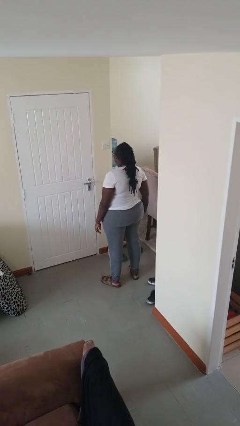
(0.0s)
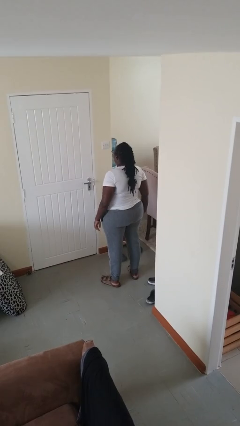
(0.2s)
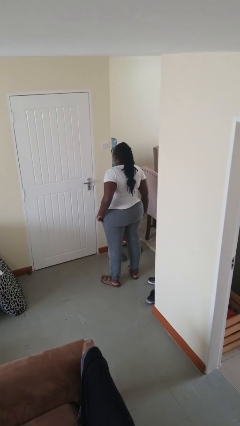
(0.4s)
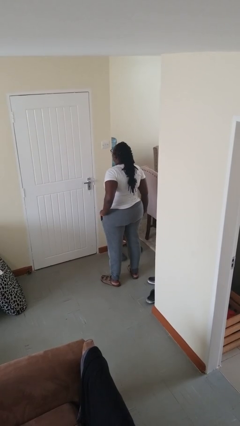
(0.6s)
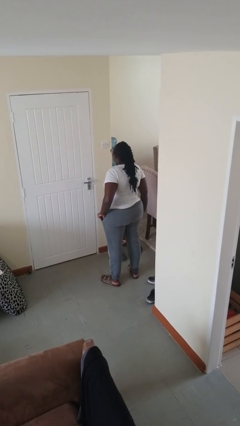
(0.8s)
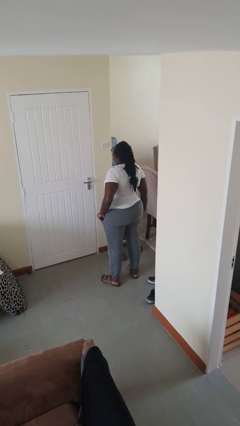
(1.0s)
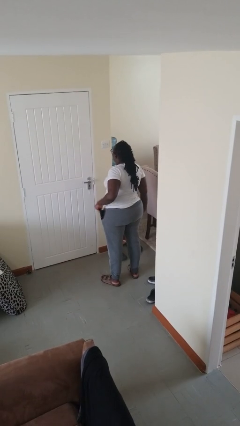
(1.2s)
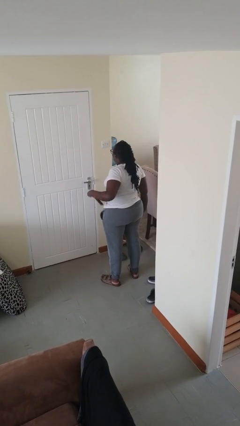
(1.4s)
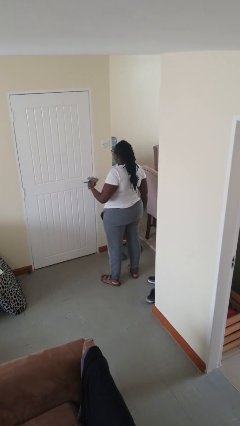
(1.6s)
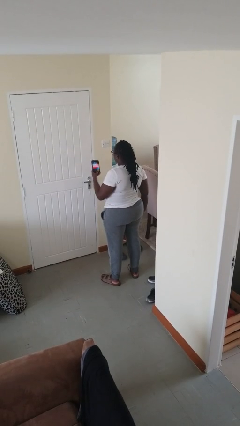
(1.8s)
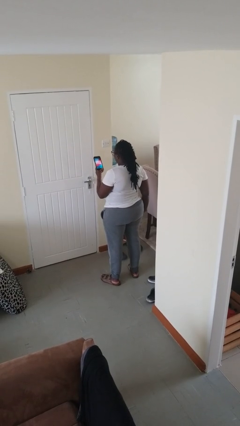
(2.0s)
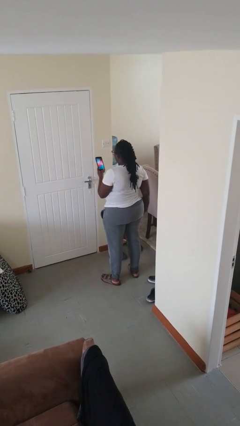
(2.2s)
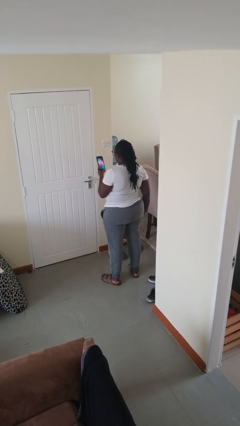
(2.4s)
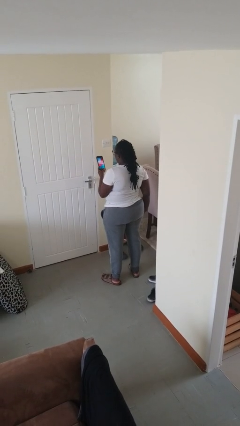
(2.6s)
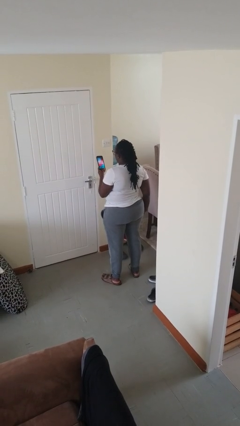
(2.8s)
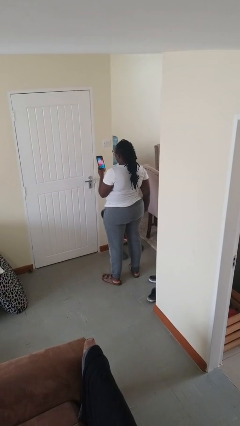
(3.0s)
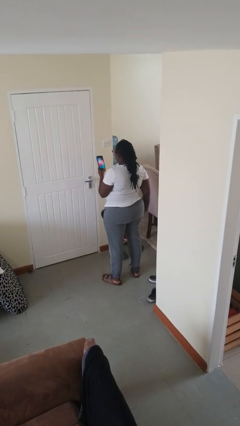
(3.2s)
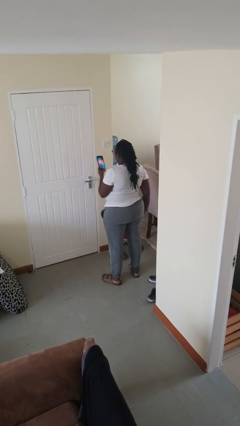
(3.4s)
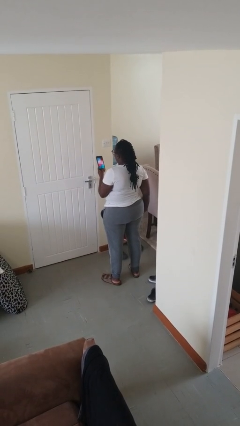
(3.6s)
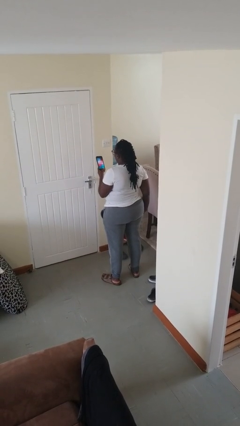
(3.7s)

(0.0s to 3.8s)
person takes phone from pocket

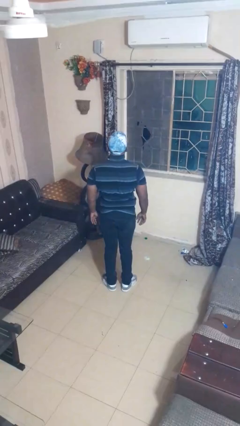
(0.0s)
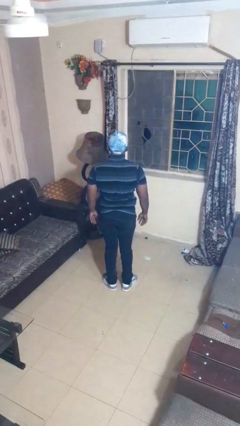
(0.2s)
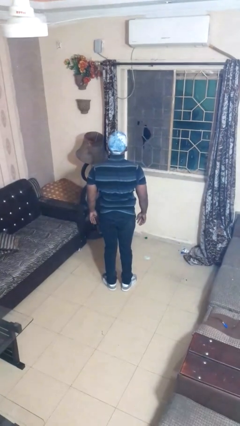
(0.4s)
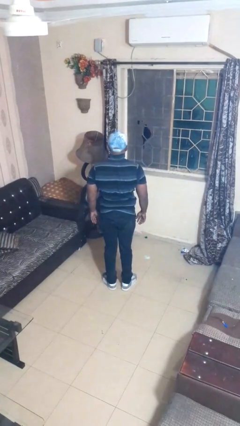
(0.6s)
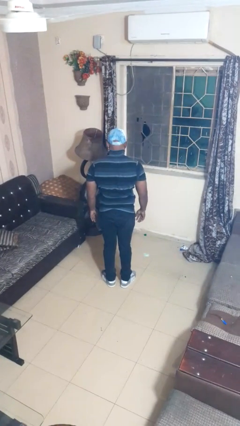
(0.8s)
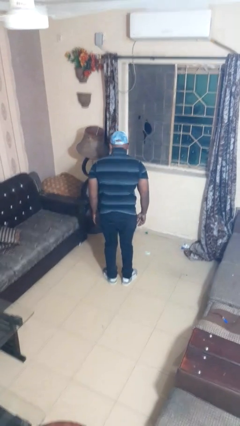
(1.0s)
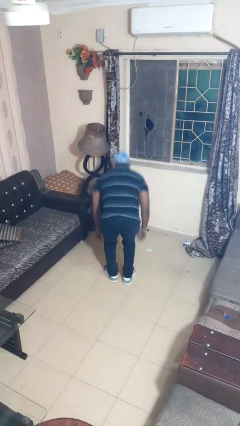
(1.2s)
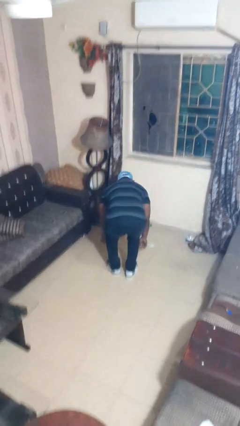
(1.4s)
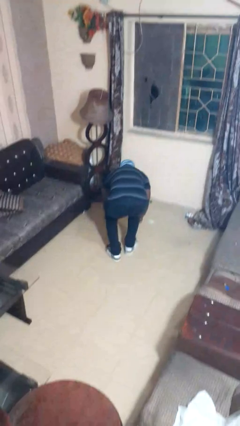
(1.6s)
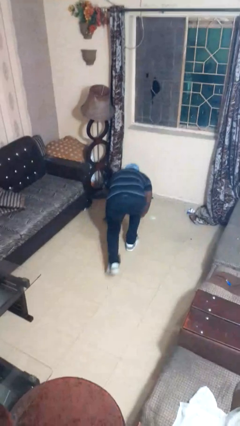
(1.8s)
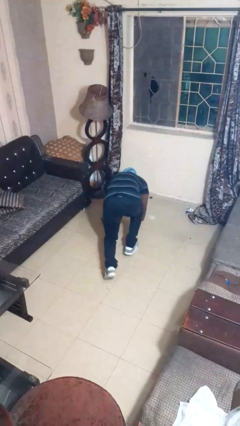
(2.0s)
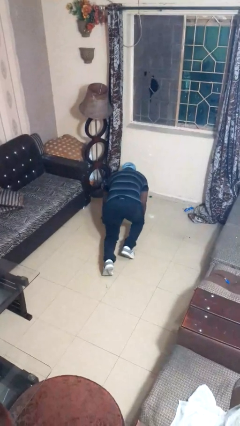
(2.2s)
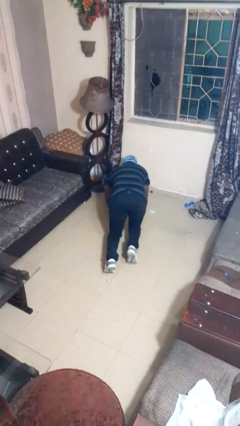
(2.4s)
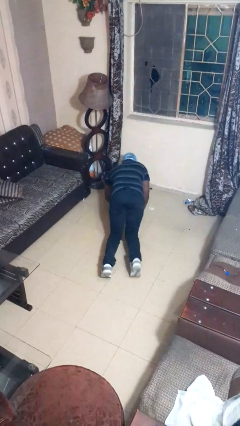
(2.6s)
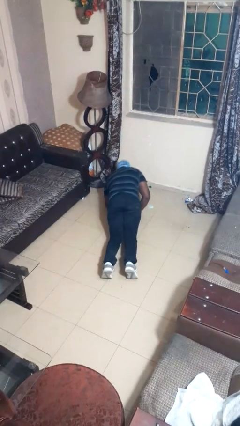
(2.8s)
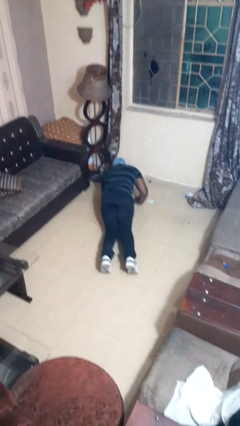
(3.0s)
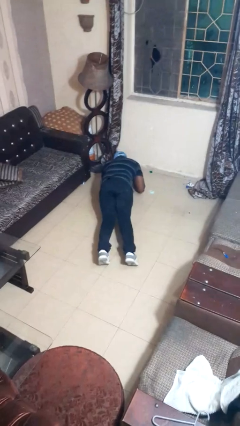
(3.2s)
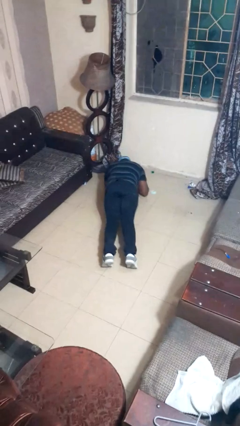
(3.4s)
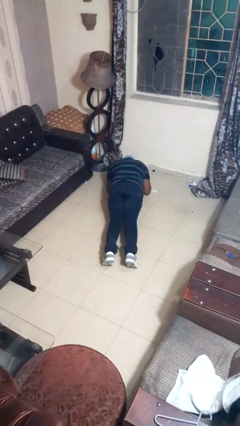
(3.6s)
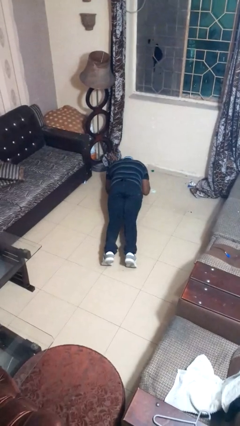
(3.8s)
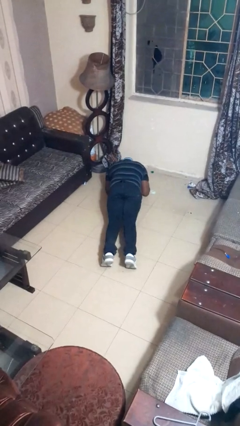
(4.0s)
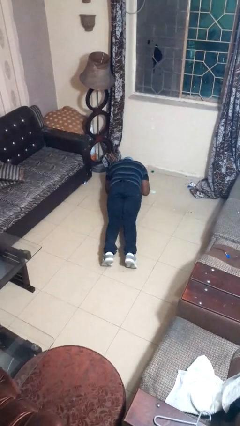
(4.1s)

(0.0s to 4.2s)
person exercises with plank

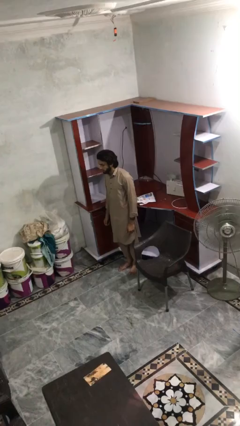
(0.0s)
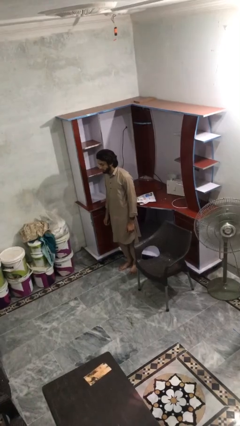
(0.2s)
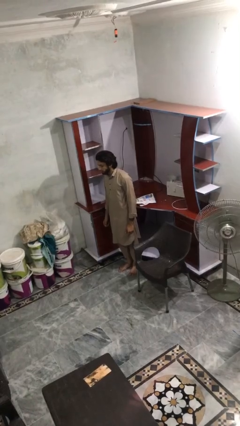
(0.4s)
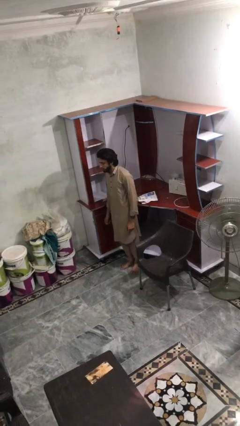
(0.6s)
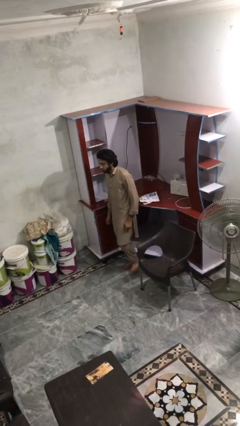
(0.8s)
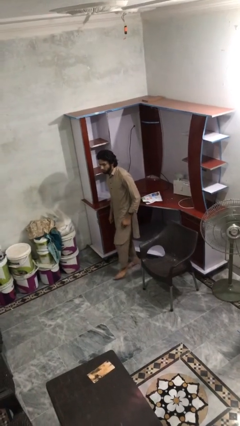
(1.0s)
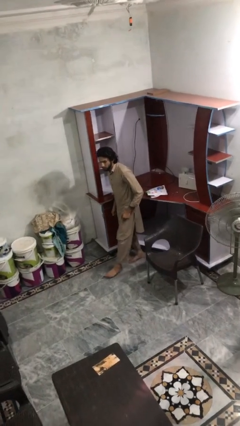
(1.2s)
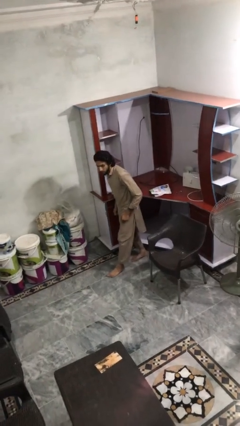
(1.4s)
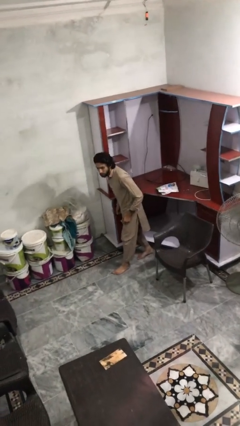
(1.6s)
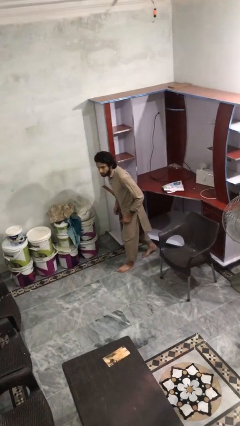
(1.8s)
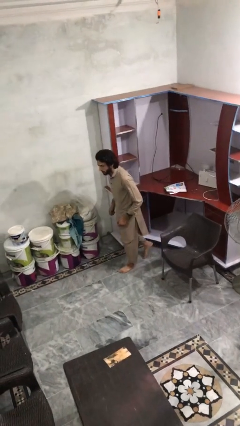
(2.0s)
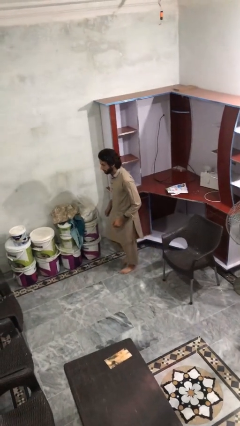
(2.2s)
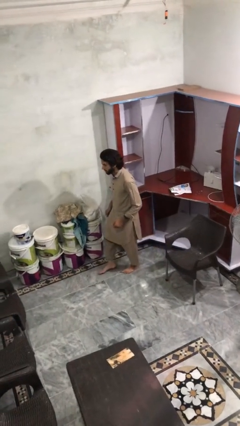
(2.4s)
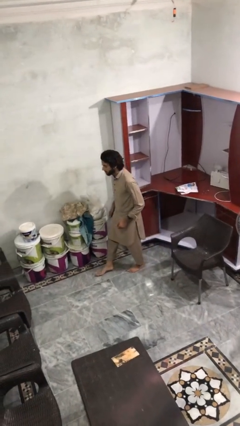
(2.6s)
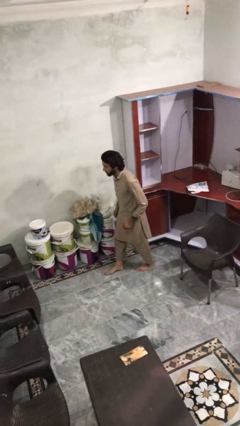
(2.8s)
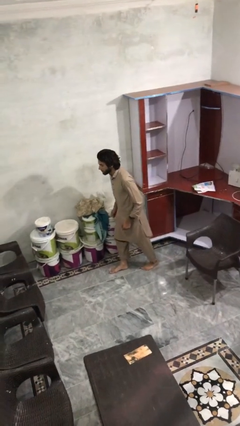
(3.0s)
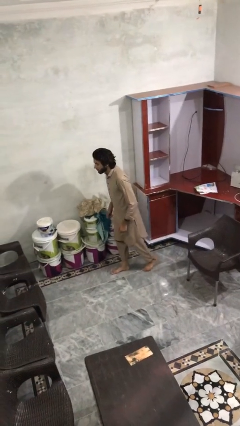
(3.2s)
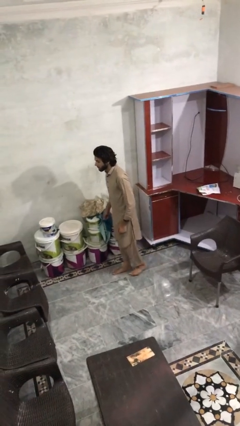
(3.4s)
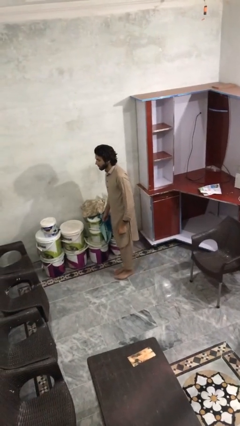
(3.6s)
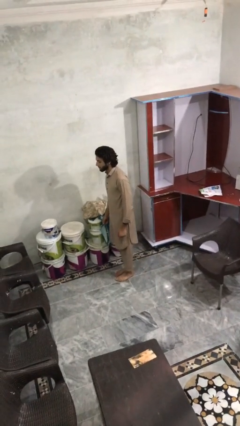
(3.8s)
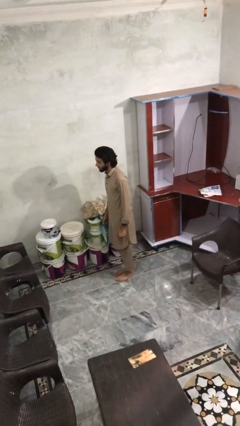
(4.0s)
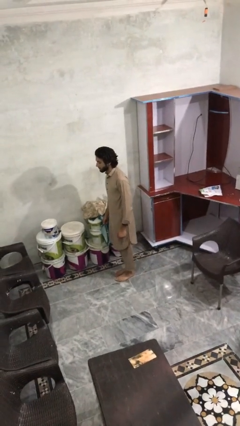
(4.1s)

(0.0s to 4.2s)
person walks tiptoe

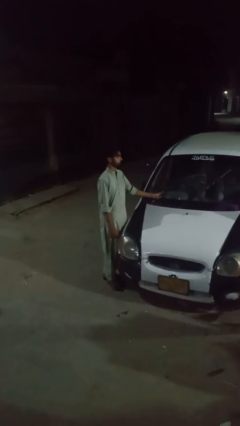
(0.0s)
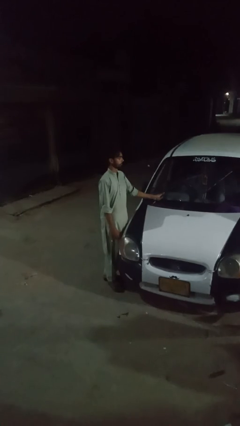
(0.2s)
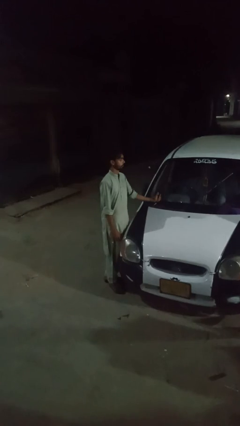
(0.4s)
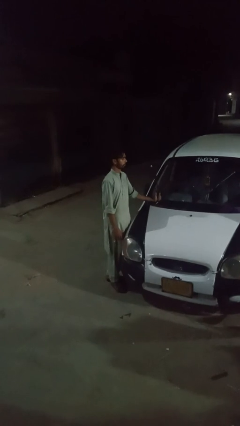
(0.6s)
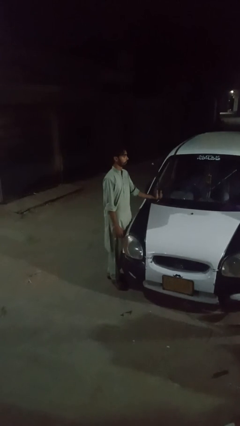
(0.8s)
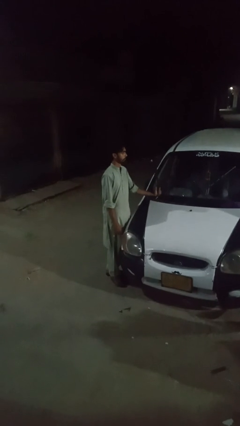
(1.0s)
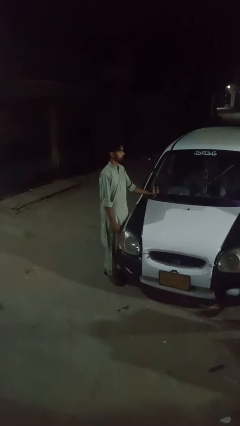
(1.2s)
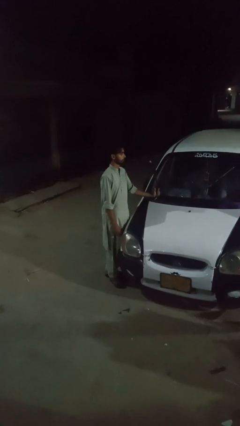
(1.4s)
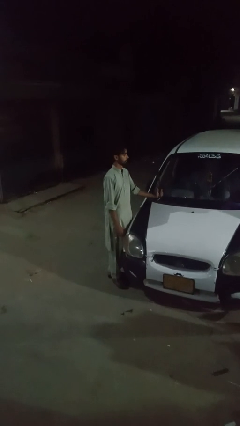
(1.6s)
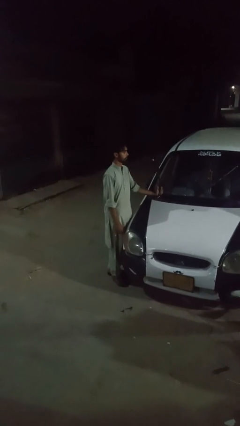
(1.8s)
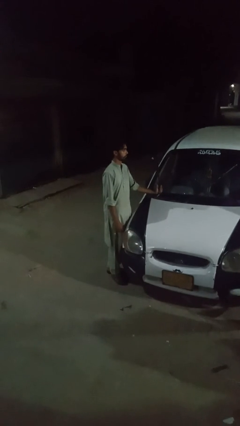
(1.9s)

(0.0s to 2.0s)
person flips up car wipers

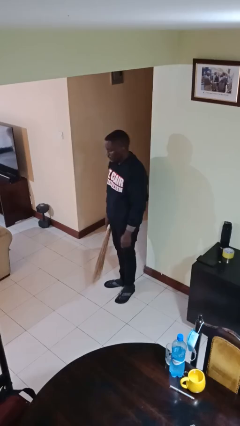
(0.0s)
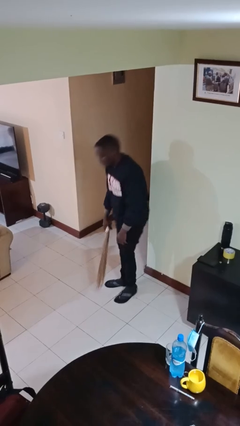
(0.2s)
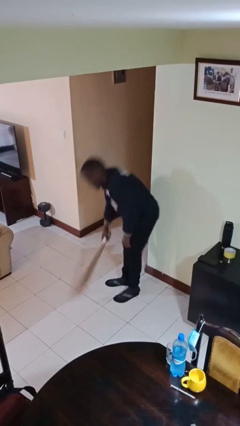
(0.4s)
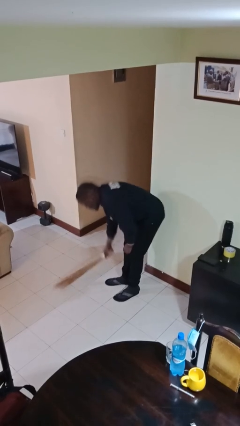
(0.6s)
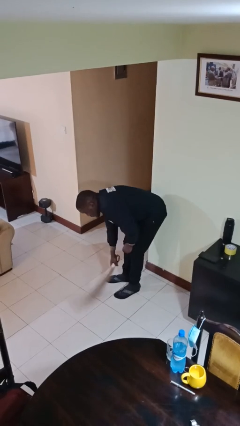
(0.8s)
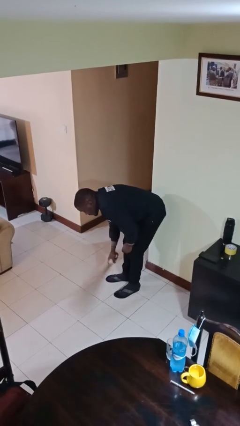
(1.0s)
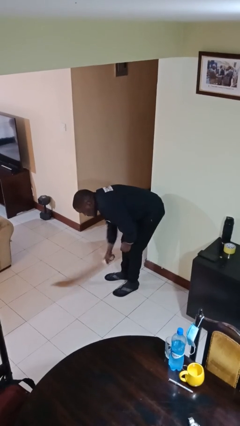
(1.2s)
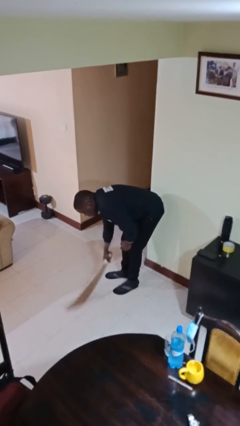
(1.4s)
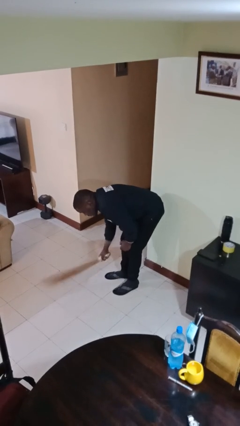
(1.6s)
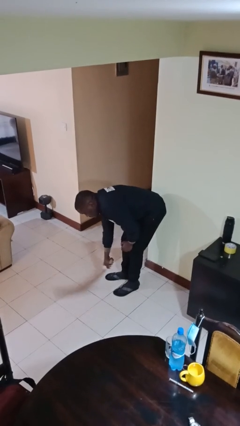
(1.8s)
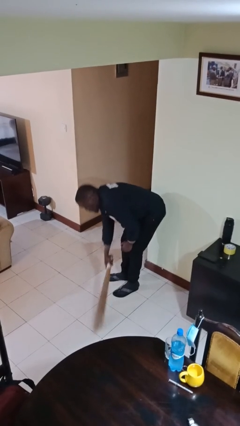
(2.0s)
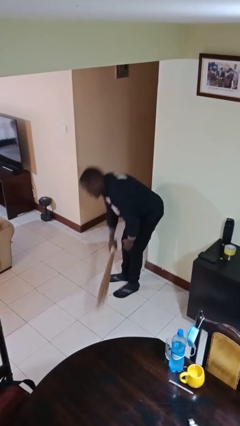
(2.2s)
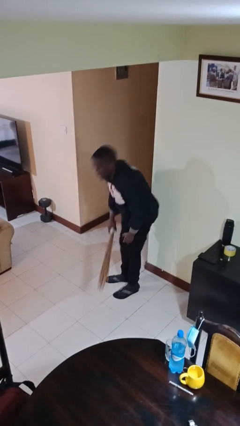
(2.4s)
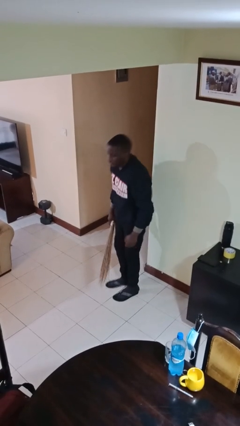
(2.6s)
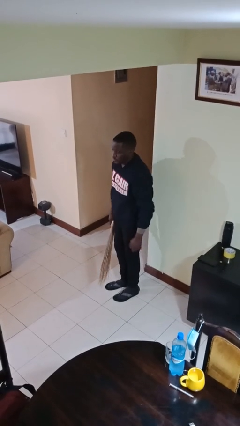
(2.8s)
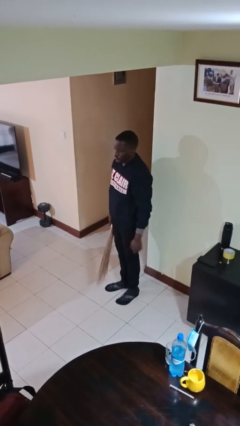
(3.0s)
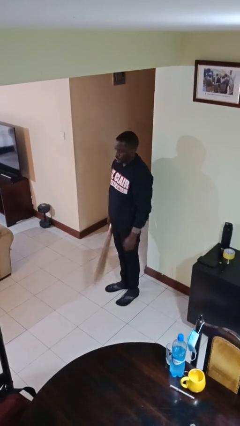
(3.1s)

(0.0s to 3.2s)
person sweeps floor

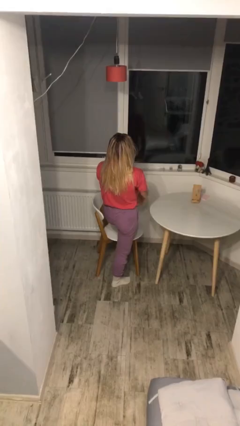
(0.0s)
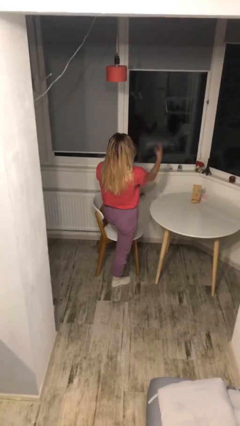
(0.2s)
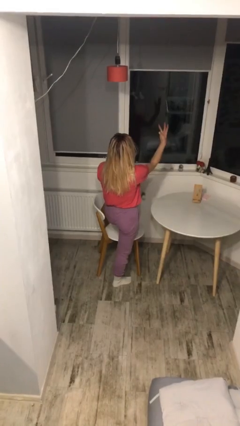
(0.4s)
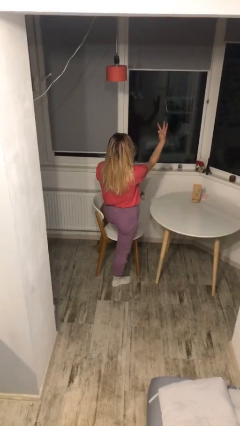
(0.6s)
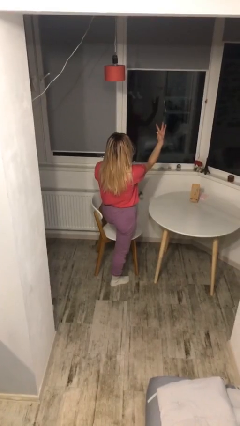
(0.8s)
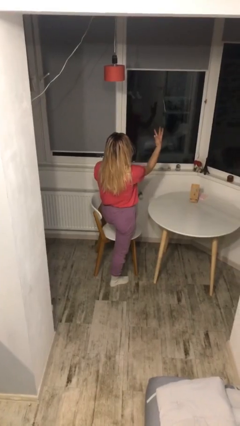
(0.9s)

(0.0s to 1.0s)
person gestures number three
